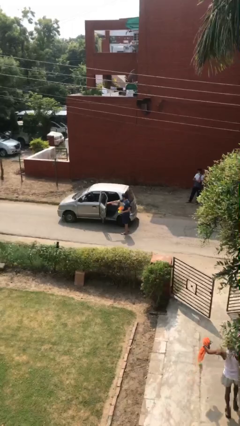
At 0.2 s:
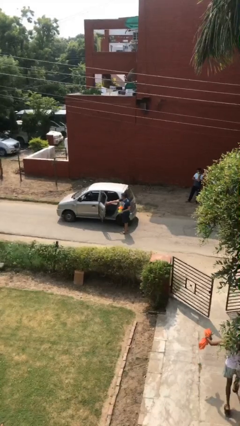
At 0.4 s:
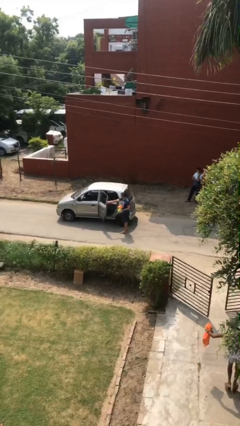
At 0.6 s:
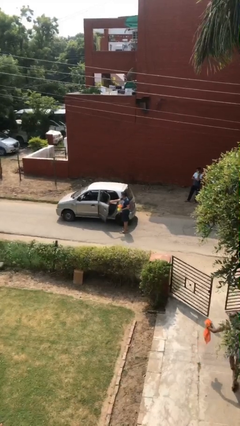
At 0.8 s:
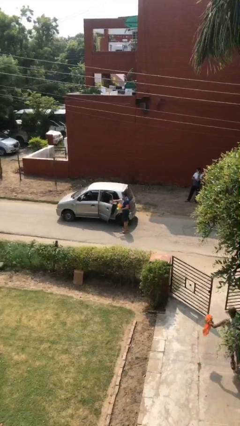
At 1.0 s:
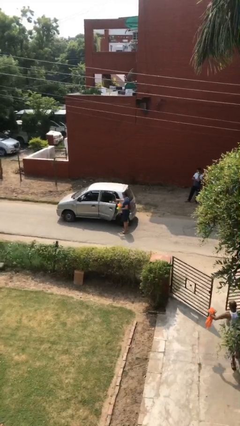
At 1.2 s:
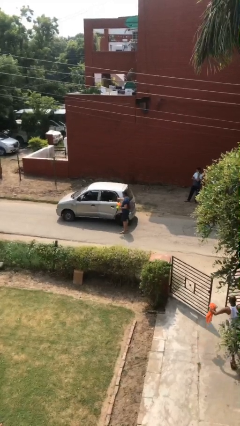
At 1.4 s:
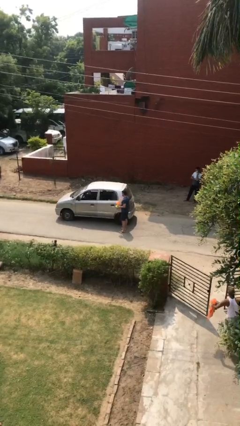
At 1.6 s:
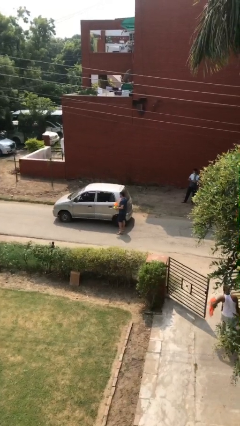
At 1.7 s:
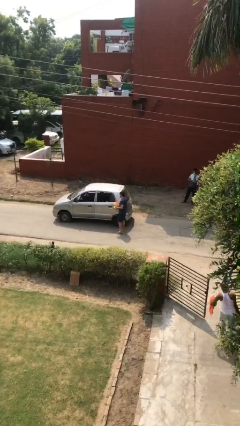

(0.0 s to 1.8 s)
person closes car door

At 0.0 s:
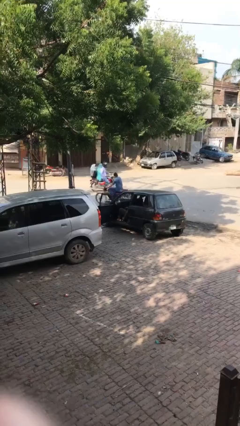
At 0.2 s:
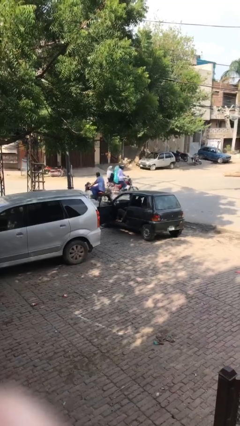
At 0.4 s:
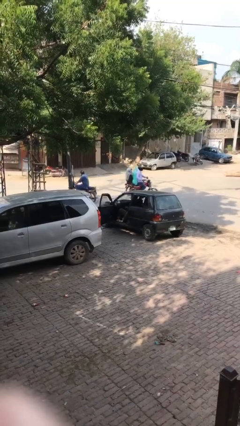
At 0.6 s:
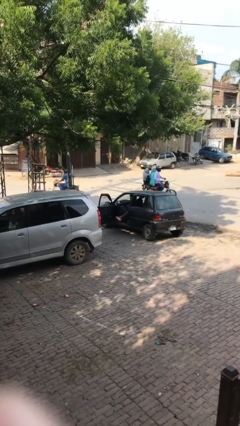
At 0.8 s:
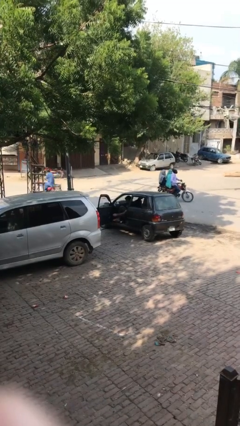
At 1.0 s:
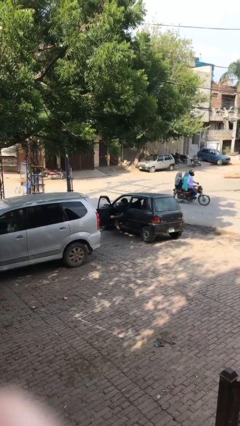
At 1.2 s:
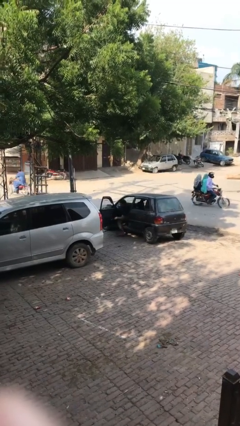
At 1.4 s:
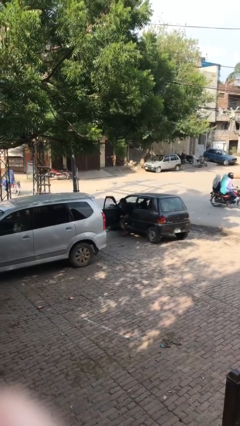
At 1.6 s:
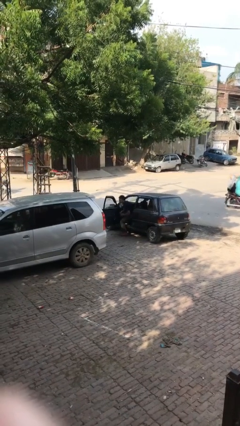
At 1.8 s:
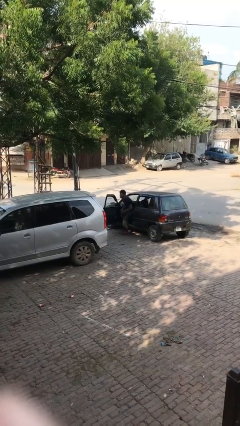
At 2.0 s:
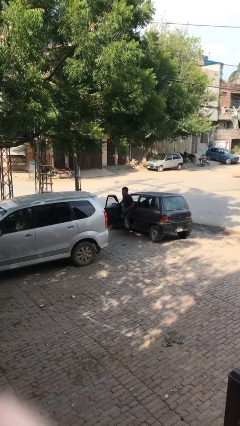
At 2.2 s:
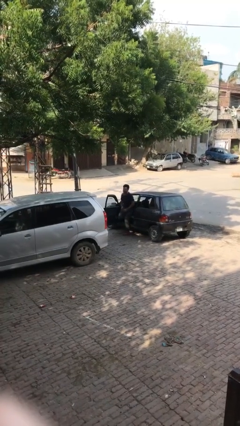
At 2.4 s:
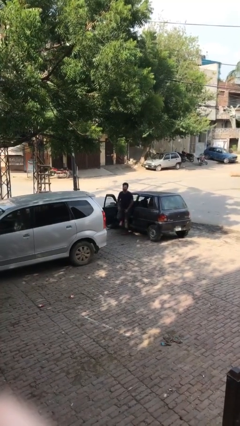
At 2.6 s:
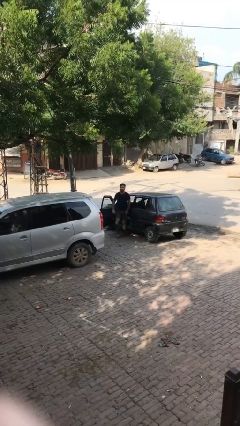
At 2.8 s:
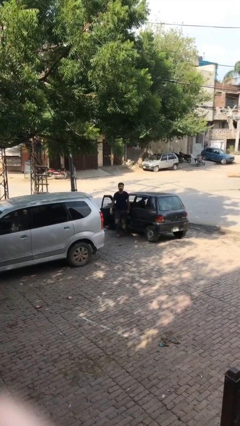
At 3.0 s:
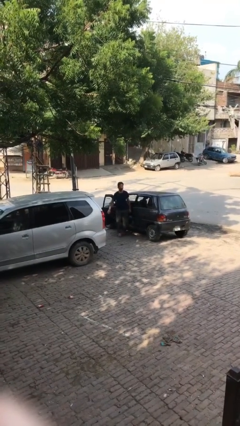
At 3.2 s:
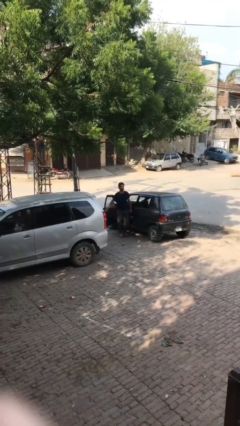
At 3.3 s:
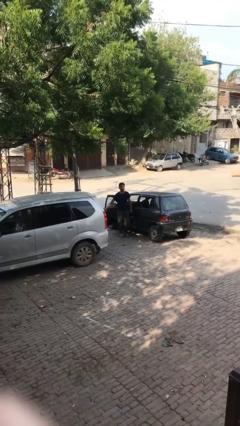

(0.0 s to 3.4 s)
person exits car

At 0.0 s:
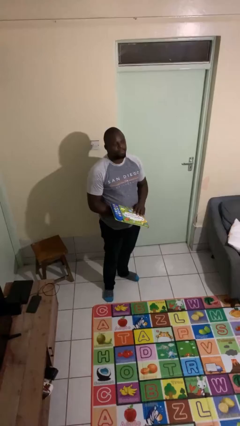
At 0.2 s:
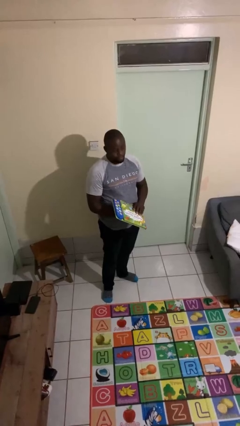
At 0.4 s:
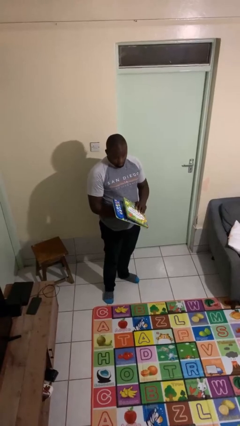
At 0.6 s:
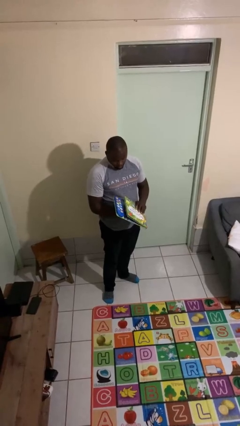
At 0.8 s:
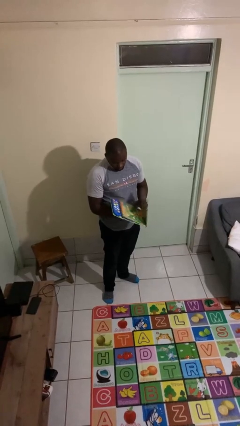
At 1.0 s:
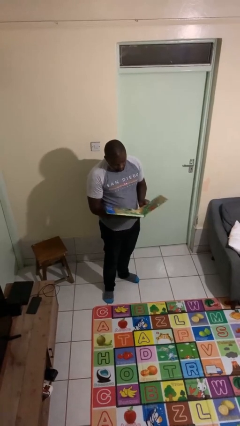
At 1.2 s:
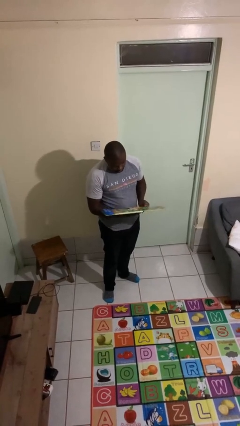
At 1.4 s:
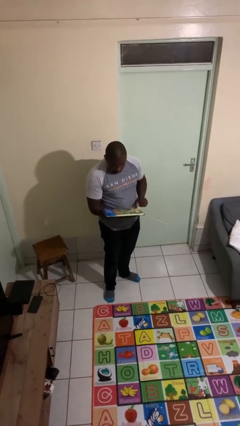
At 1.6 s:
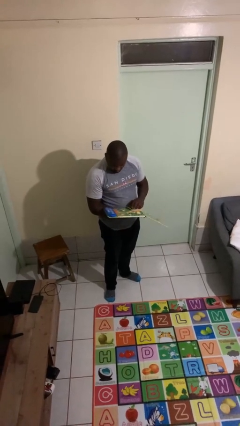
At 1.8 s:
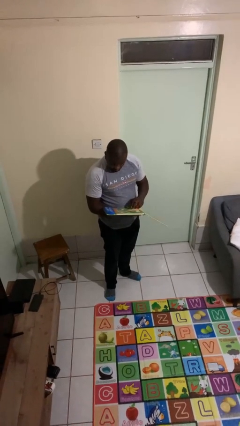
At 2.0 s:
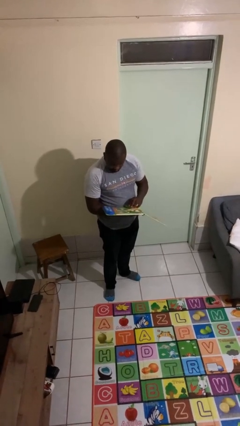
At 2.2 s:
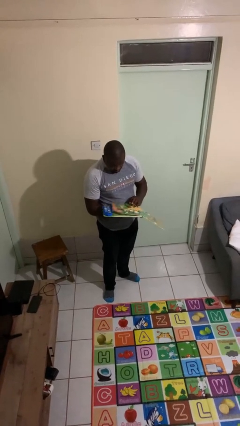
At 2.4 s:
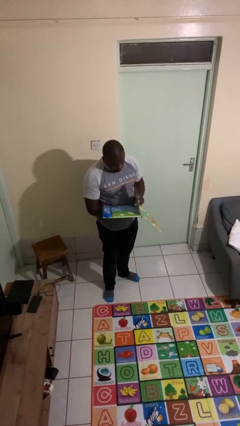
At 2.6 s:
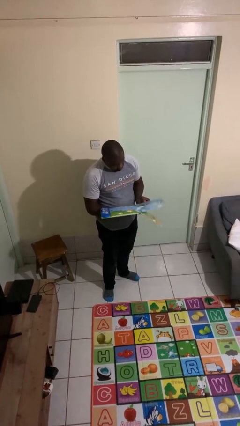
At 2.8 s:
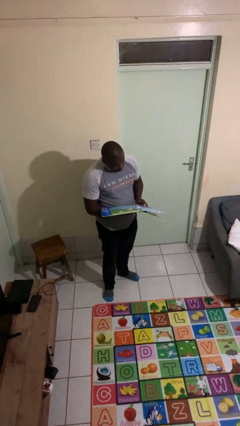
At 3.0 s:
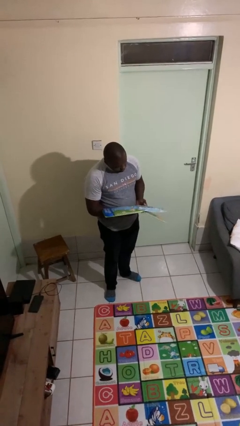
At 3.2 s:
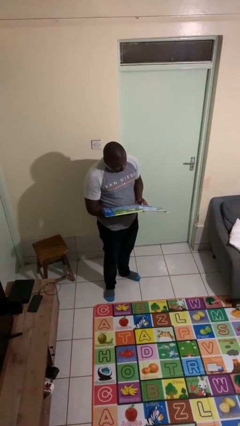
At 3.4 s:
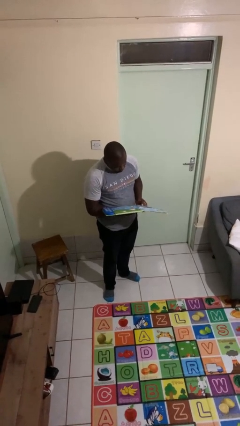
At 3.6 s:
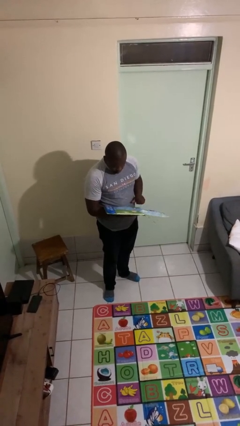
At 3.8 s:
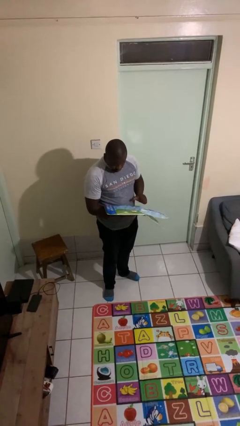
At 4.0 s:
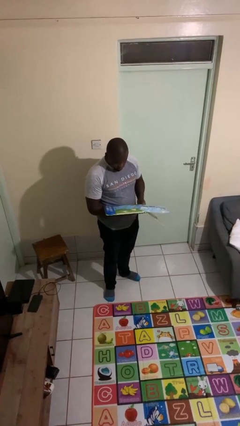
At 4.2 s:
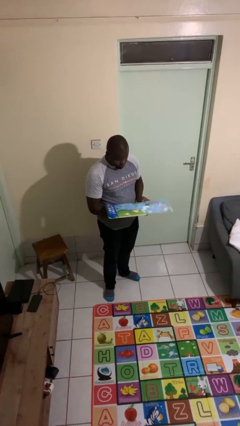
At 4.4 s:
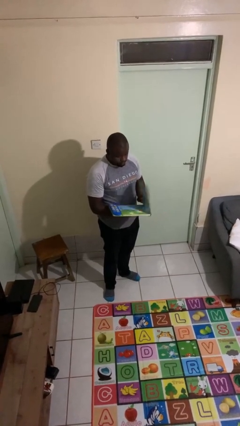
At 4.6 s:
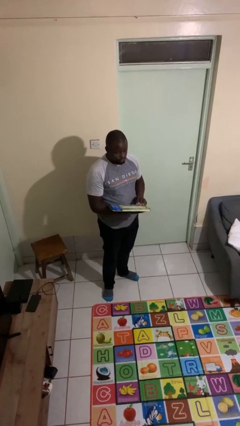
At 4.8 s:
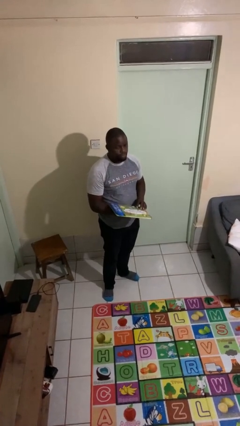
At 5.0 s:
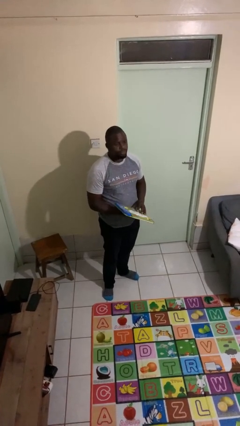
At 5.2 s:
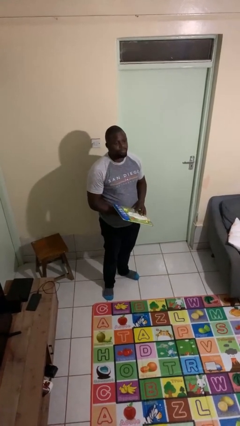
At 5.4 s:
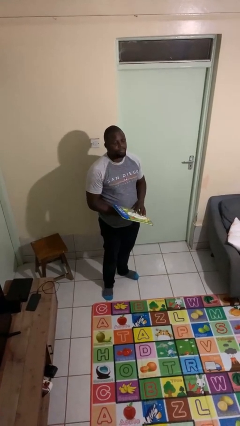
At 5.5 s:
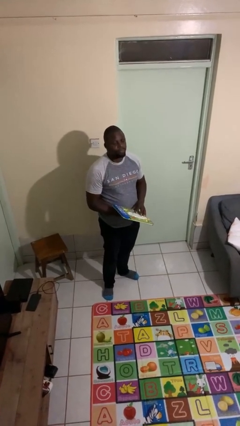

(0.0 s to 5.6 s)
person reads book

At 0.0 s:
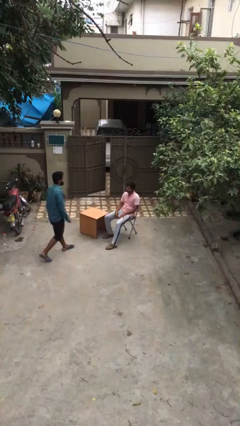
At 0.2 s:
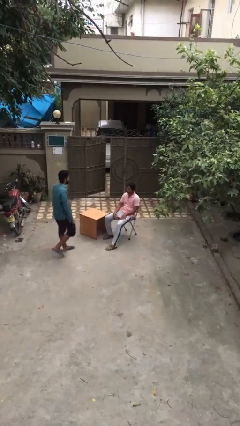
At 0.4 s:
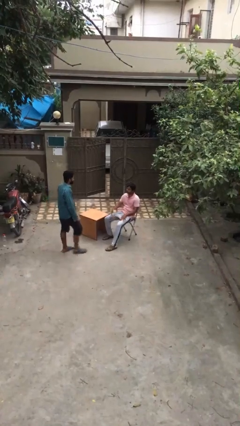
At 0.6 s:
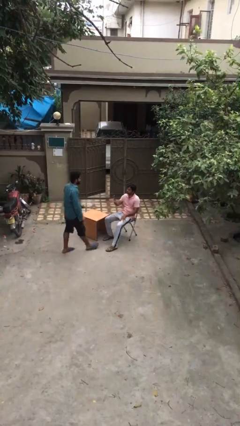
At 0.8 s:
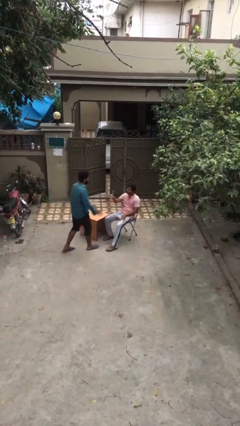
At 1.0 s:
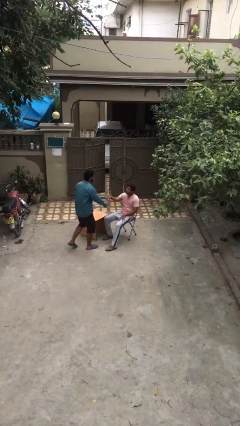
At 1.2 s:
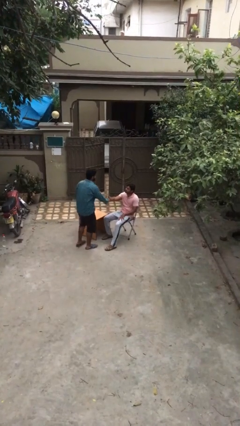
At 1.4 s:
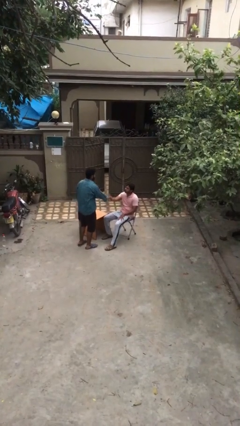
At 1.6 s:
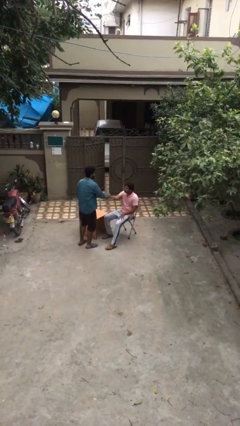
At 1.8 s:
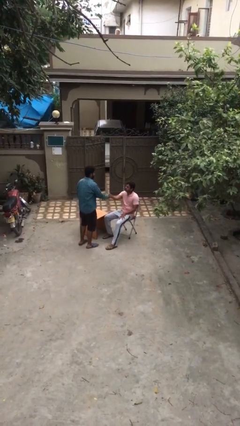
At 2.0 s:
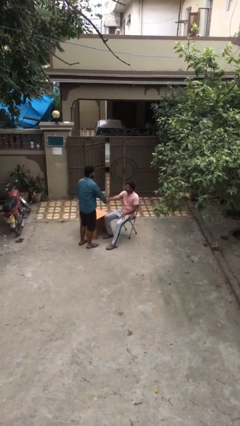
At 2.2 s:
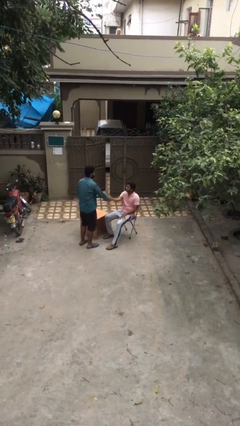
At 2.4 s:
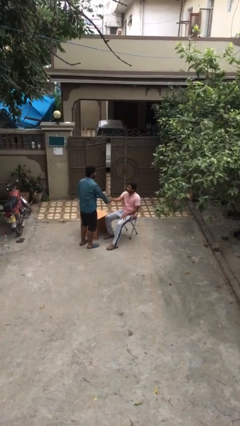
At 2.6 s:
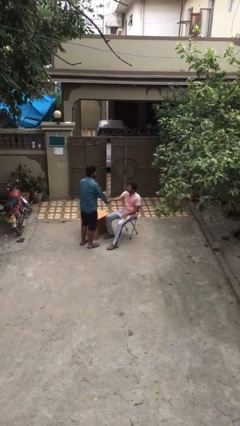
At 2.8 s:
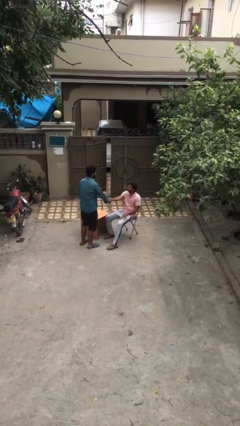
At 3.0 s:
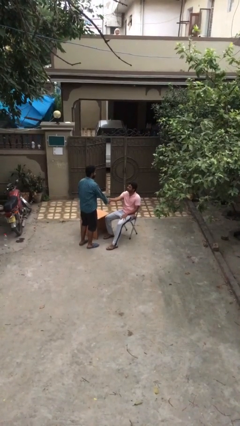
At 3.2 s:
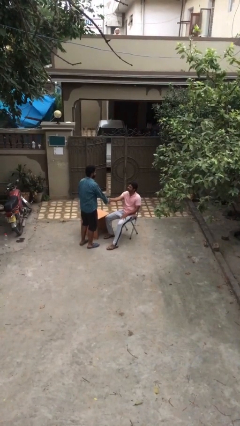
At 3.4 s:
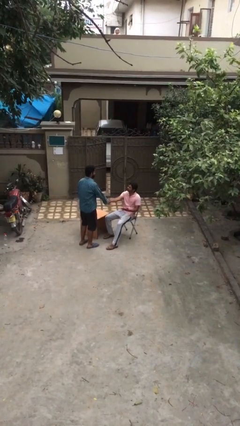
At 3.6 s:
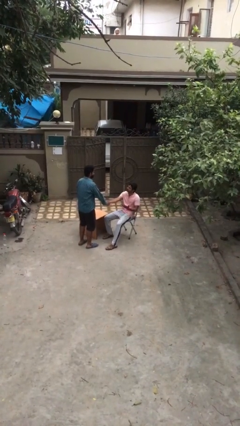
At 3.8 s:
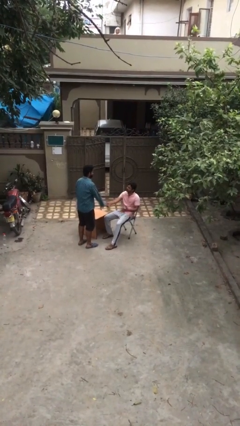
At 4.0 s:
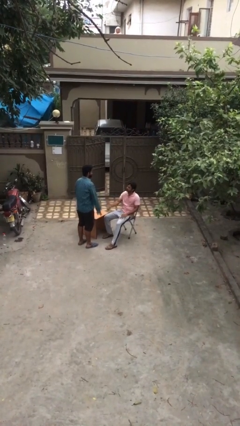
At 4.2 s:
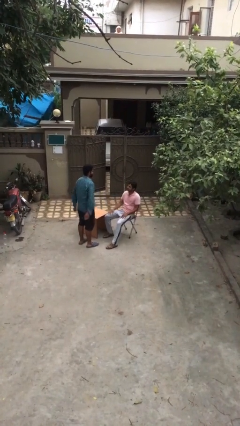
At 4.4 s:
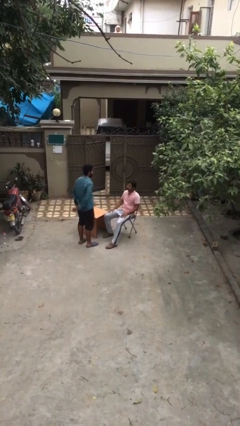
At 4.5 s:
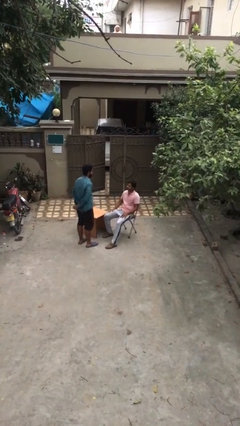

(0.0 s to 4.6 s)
person shakes hand

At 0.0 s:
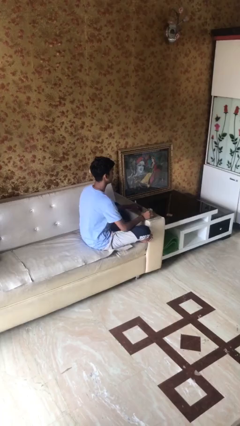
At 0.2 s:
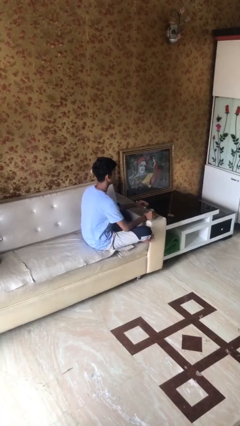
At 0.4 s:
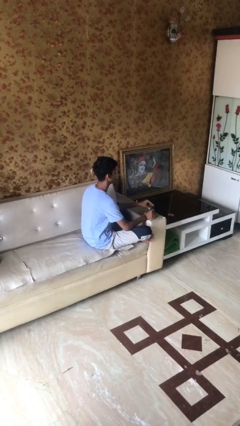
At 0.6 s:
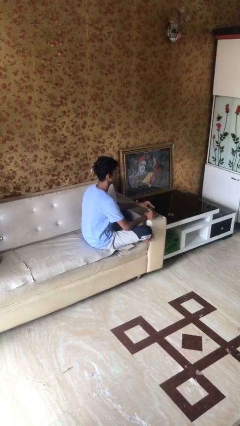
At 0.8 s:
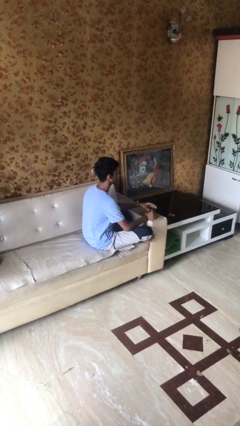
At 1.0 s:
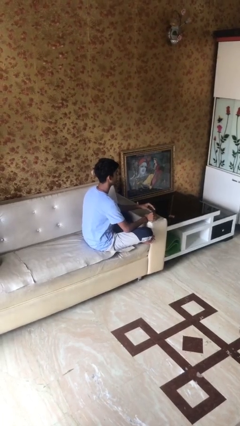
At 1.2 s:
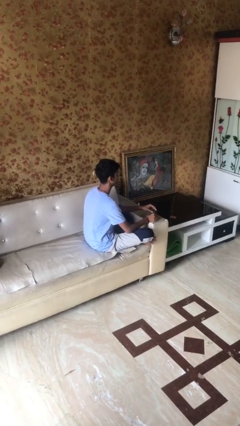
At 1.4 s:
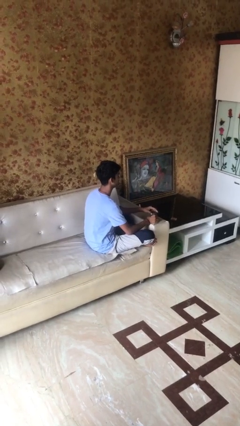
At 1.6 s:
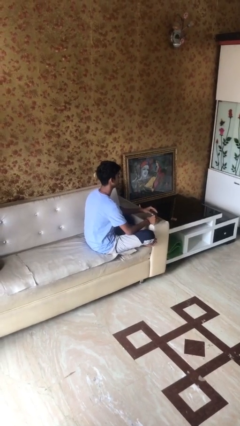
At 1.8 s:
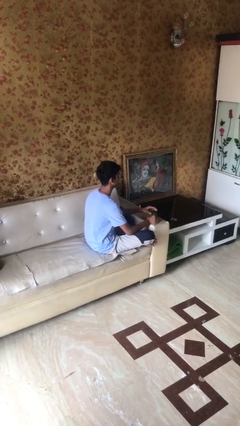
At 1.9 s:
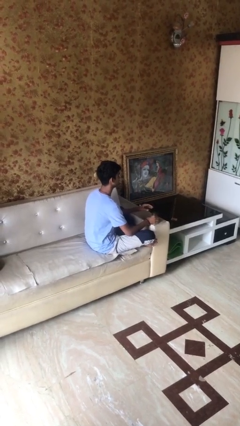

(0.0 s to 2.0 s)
person closes jar

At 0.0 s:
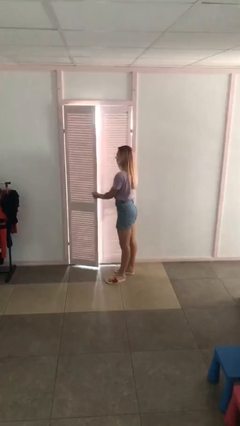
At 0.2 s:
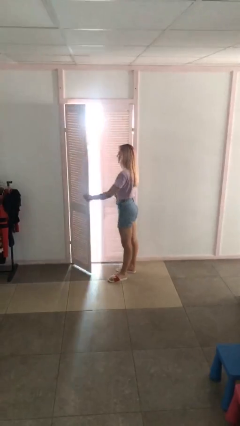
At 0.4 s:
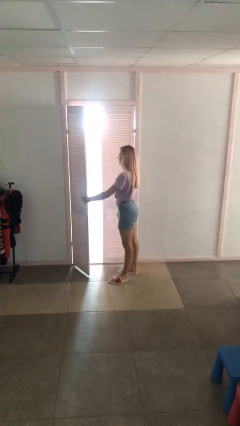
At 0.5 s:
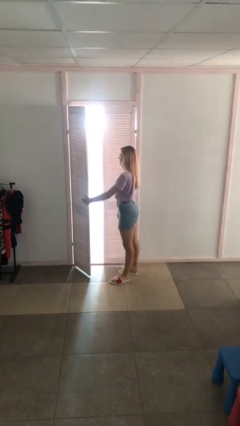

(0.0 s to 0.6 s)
person opens facility door
